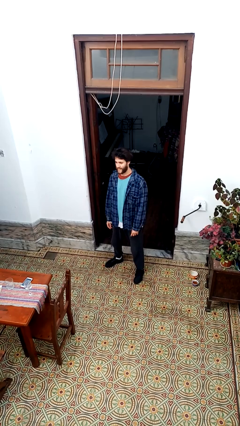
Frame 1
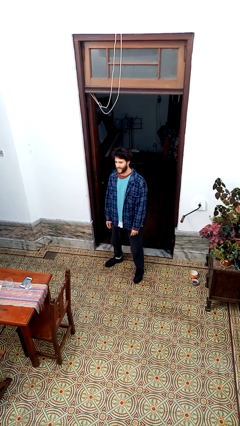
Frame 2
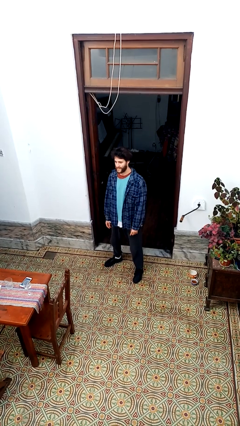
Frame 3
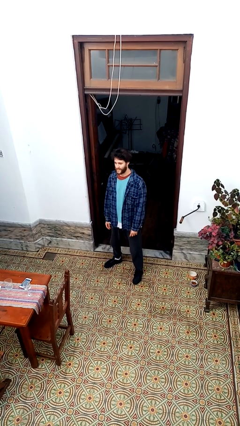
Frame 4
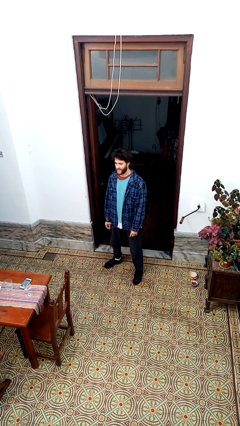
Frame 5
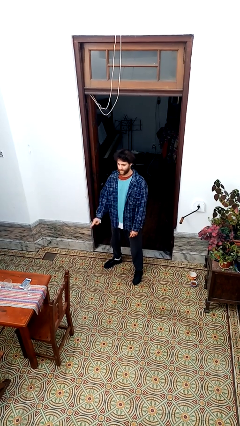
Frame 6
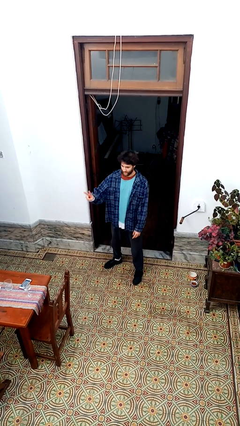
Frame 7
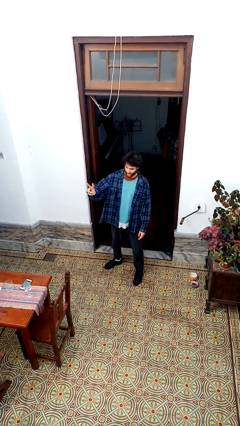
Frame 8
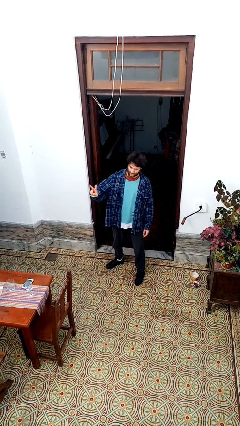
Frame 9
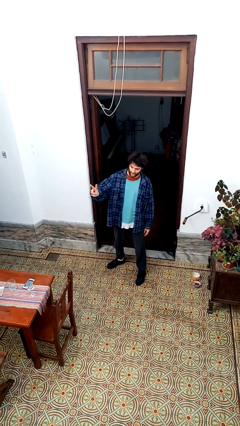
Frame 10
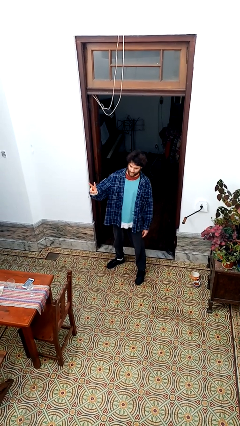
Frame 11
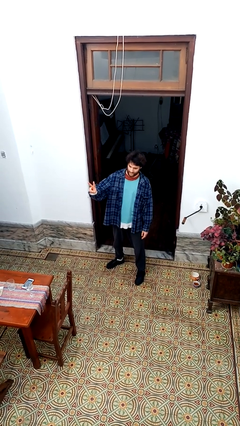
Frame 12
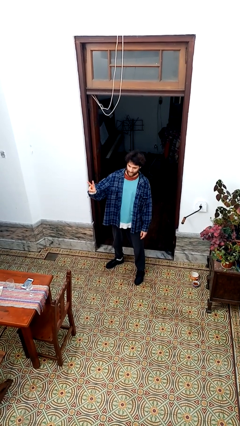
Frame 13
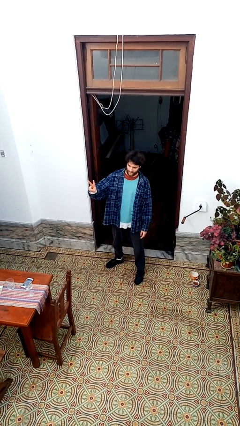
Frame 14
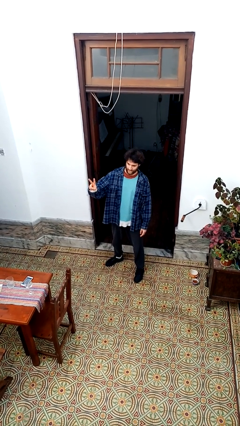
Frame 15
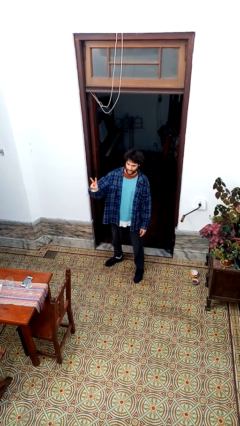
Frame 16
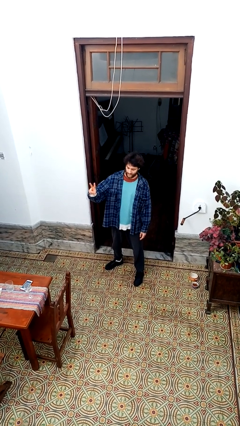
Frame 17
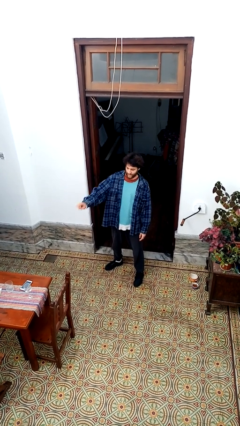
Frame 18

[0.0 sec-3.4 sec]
person gestures peace

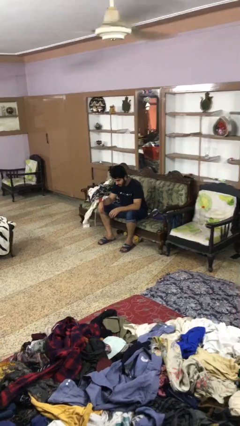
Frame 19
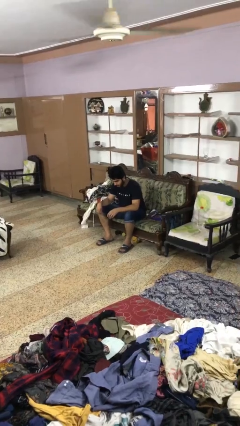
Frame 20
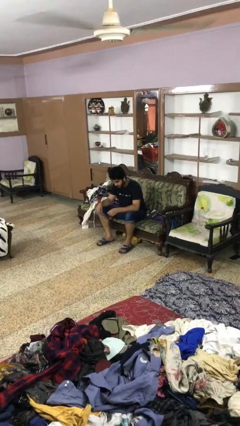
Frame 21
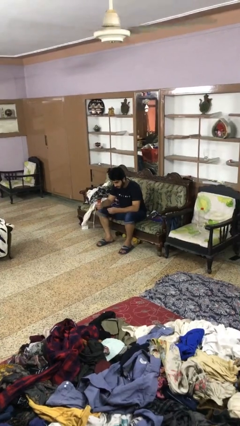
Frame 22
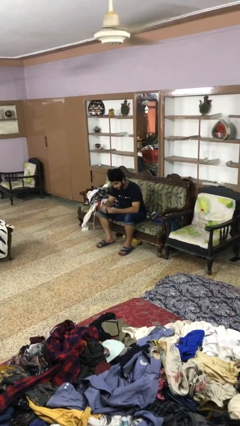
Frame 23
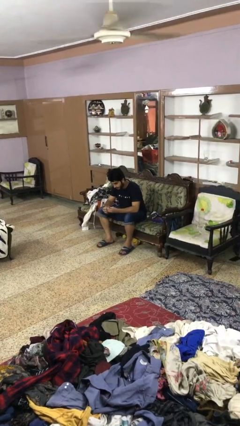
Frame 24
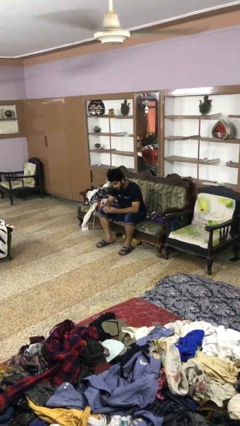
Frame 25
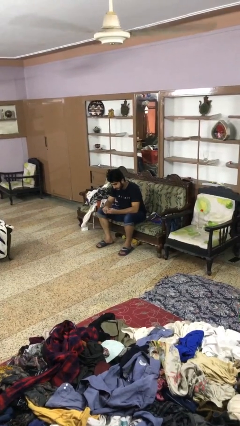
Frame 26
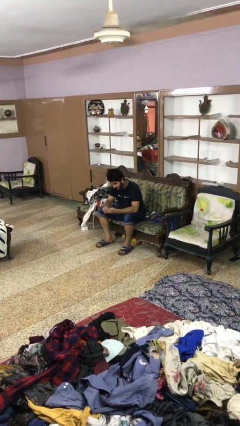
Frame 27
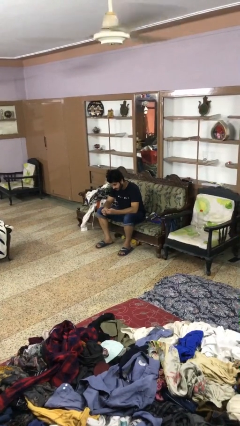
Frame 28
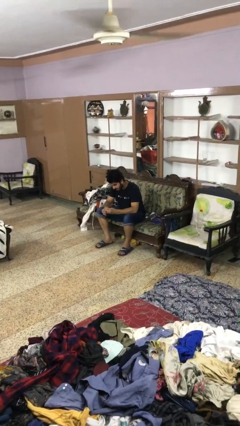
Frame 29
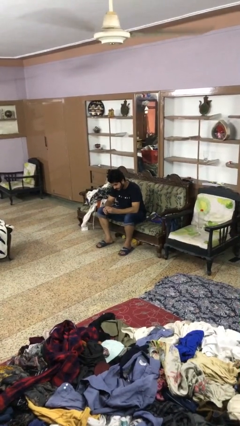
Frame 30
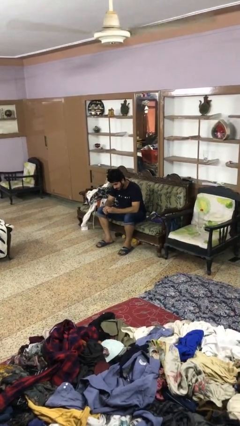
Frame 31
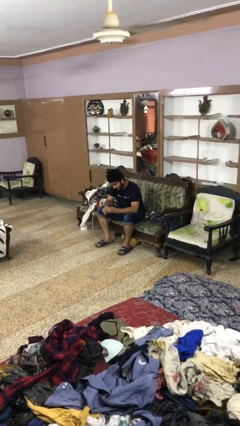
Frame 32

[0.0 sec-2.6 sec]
person files fingernails

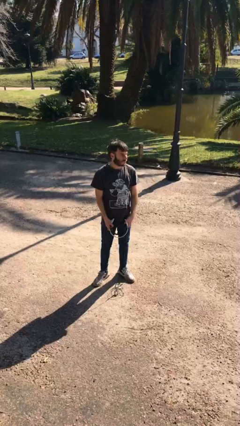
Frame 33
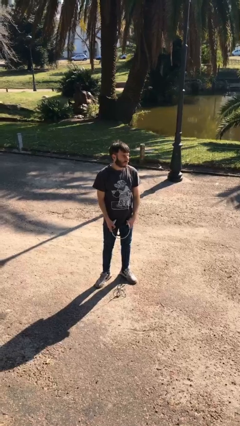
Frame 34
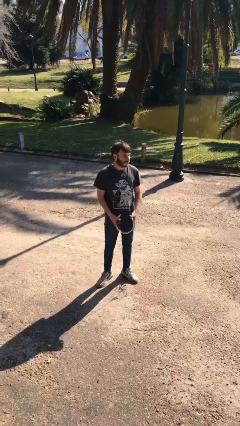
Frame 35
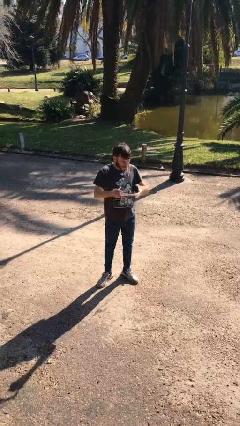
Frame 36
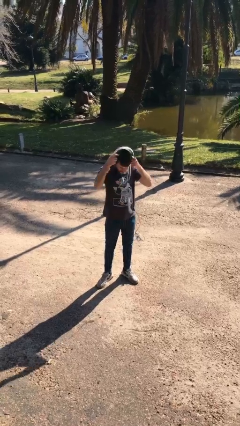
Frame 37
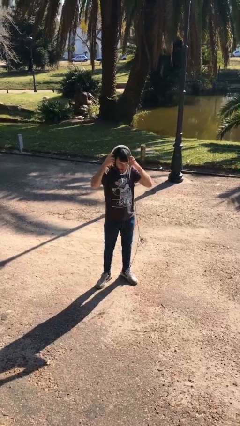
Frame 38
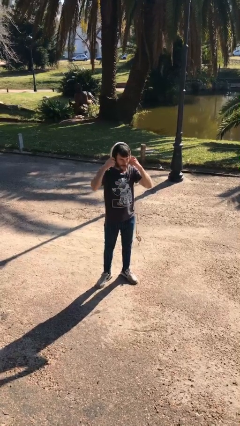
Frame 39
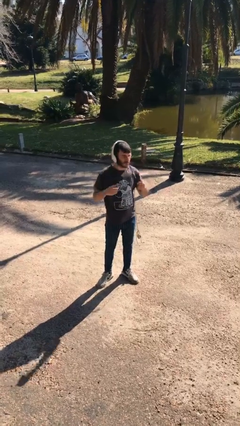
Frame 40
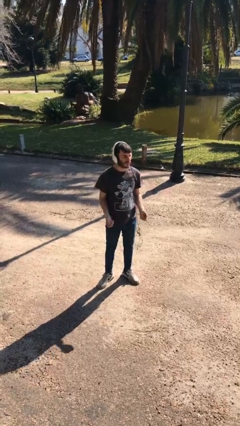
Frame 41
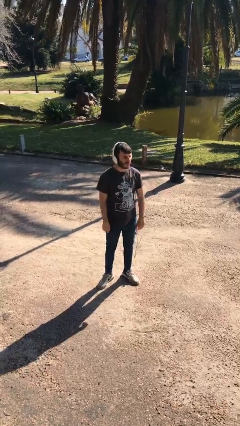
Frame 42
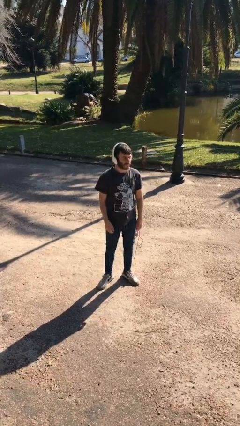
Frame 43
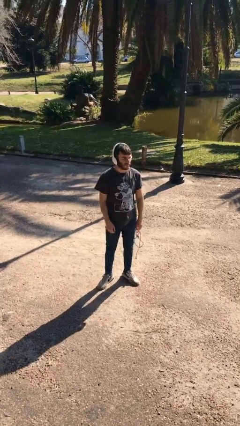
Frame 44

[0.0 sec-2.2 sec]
person puts on headphones

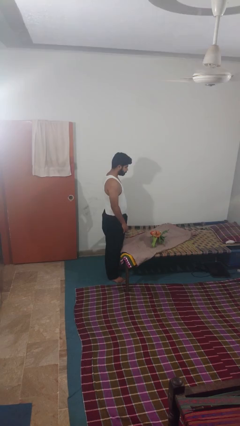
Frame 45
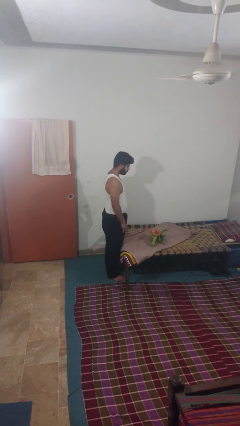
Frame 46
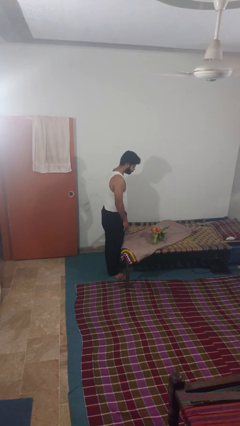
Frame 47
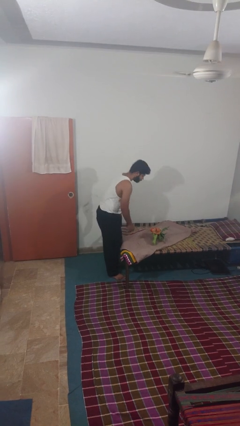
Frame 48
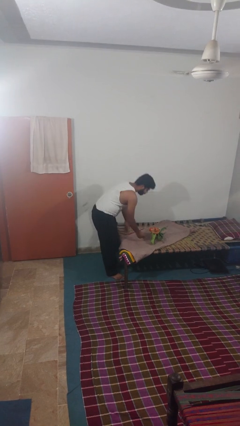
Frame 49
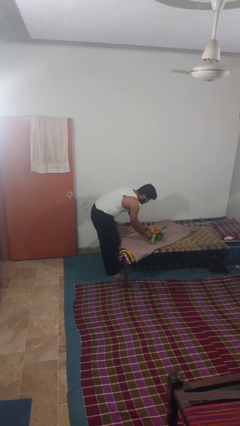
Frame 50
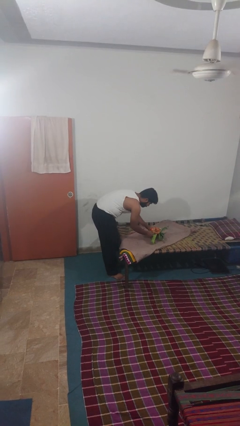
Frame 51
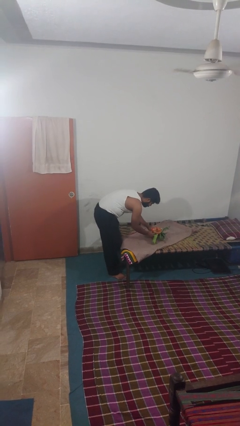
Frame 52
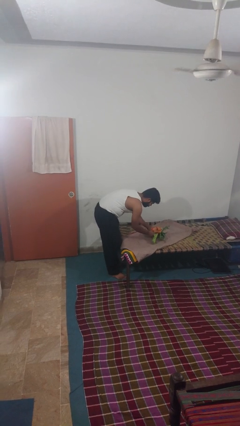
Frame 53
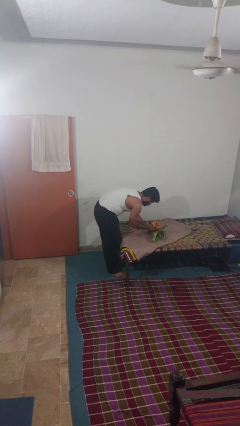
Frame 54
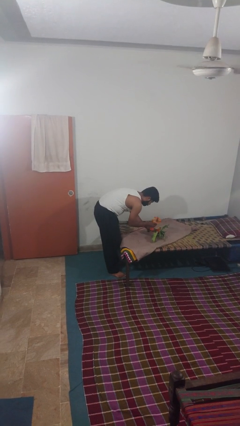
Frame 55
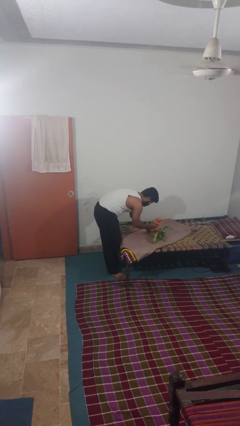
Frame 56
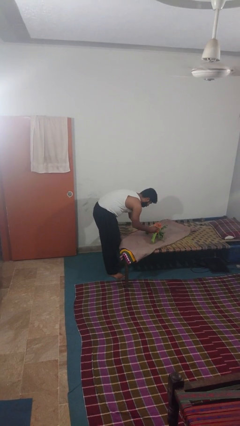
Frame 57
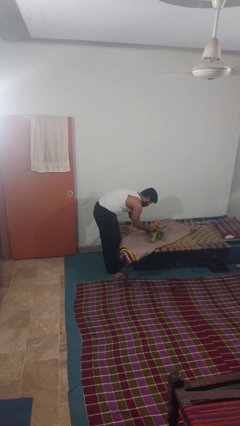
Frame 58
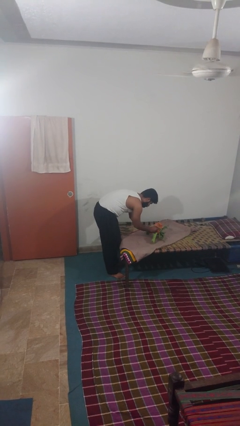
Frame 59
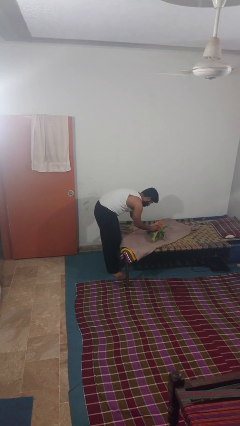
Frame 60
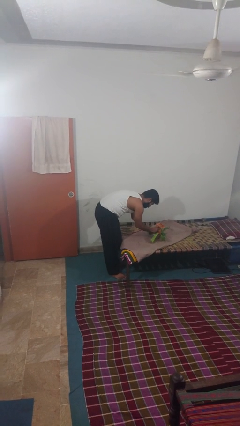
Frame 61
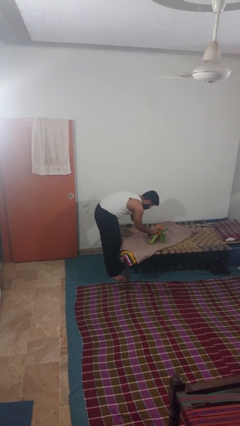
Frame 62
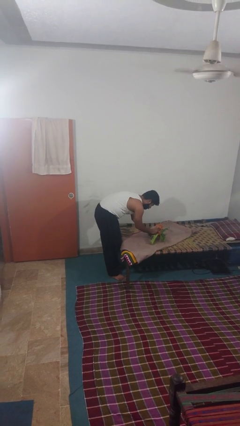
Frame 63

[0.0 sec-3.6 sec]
person arranges flowers in vase

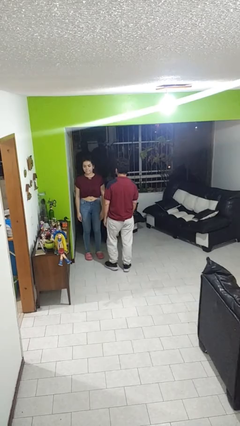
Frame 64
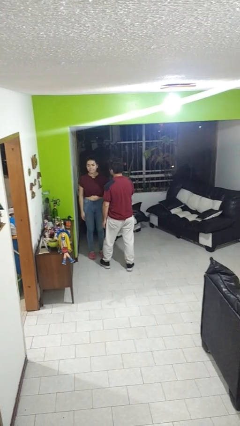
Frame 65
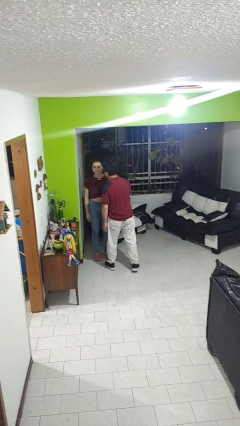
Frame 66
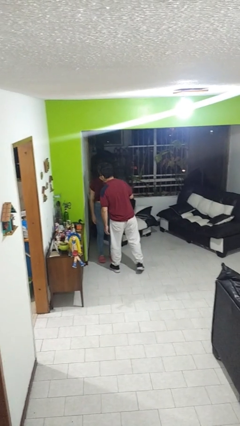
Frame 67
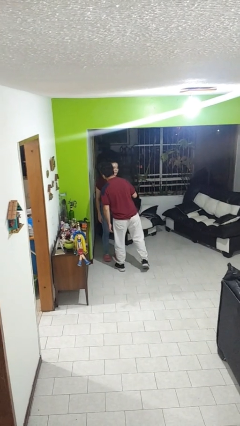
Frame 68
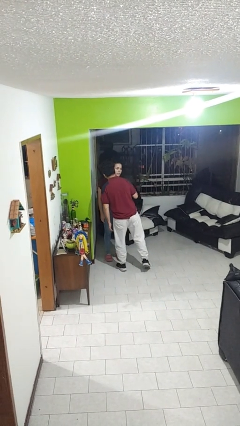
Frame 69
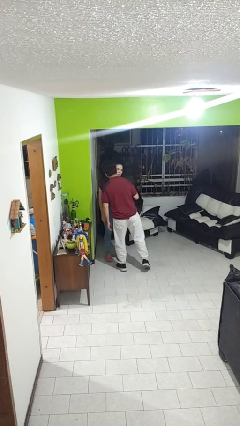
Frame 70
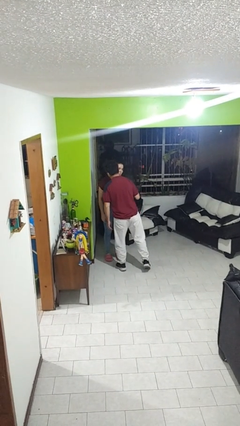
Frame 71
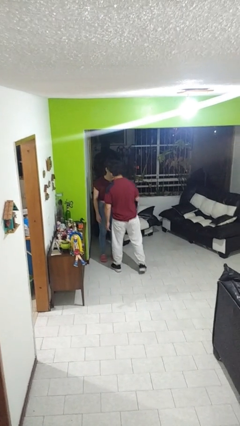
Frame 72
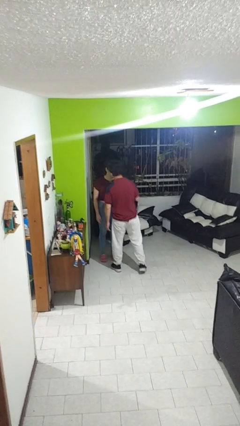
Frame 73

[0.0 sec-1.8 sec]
person kisses cheek of person

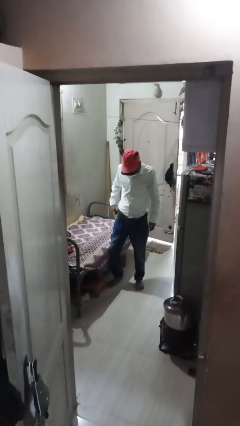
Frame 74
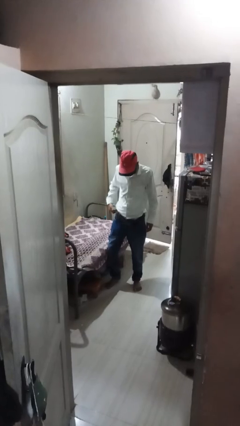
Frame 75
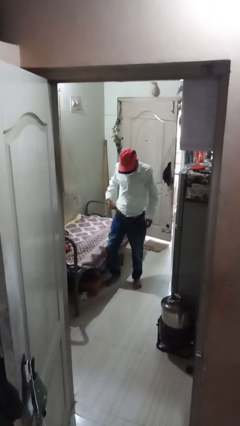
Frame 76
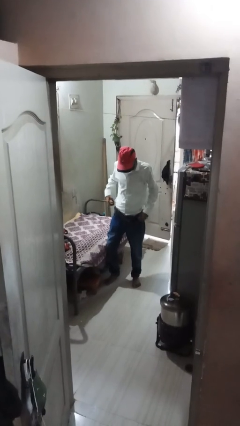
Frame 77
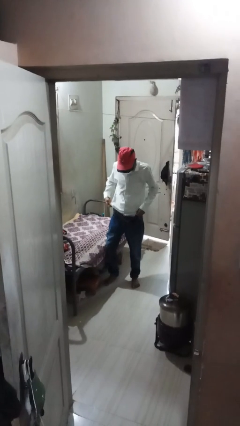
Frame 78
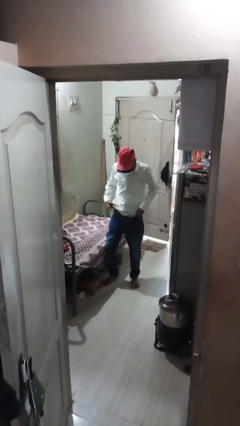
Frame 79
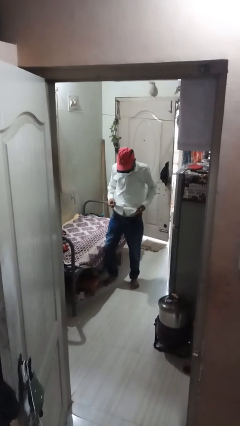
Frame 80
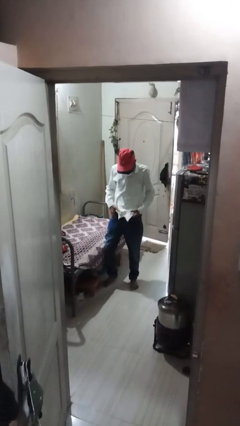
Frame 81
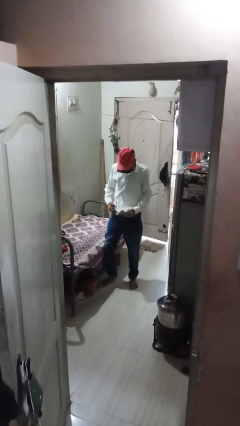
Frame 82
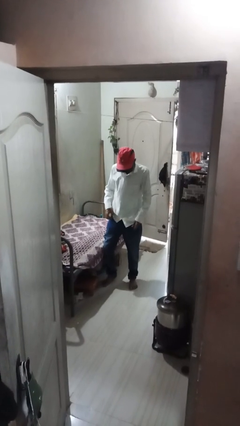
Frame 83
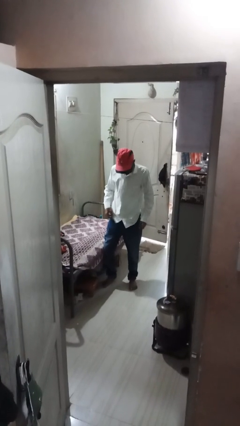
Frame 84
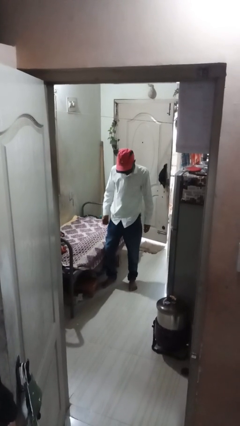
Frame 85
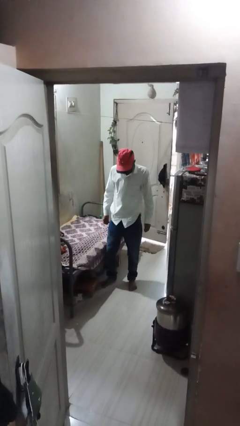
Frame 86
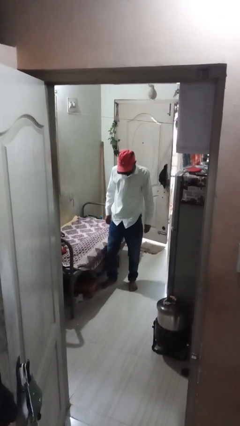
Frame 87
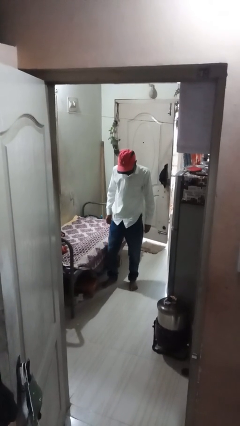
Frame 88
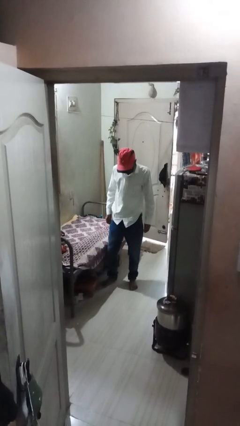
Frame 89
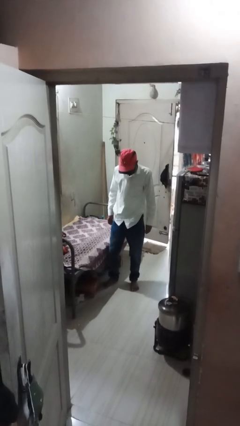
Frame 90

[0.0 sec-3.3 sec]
person untucks shirt

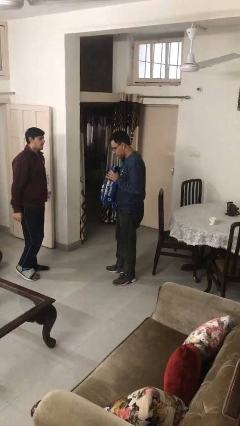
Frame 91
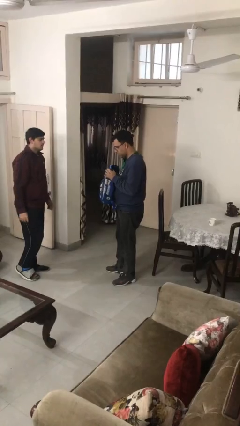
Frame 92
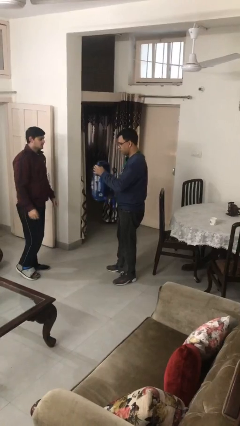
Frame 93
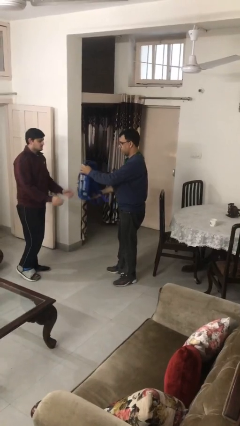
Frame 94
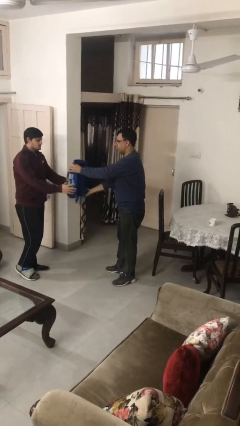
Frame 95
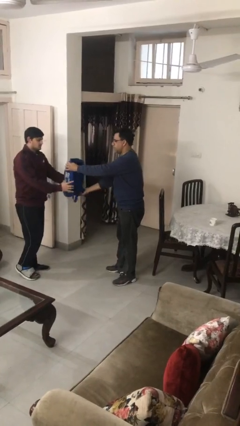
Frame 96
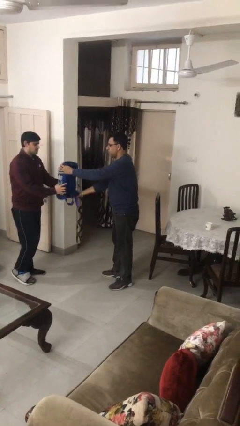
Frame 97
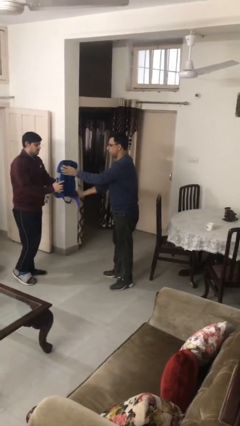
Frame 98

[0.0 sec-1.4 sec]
person transfers object to person
